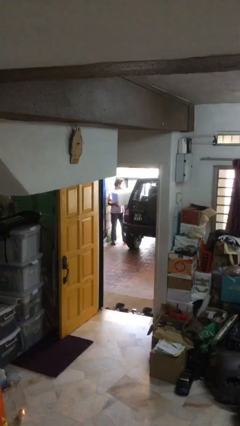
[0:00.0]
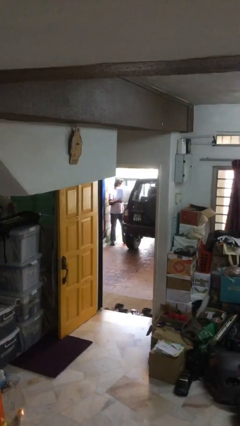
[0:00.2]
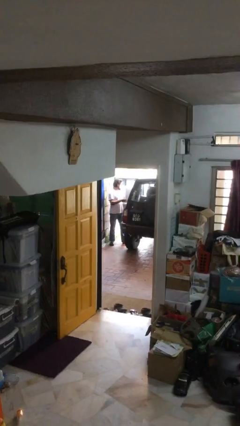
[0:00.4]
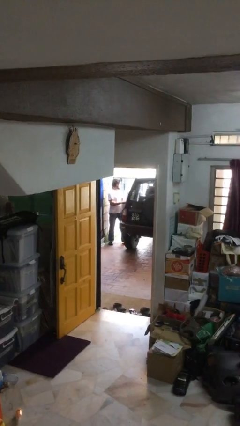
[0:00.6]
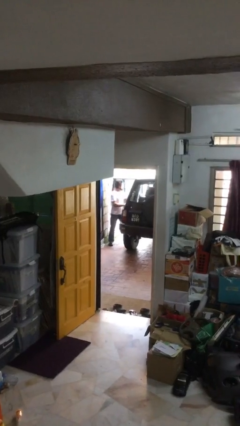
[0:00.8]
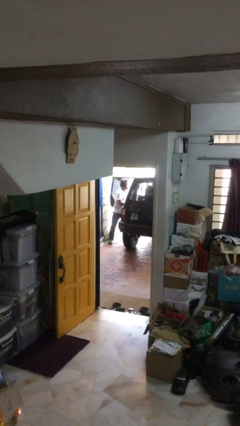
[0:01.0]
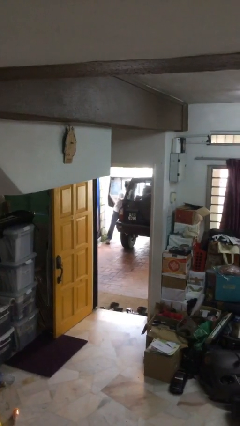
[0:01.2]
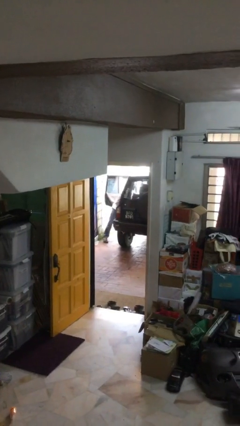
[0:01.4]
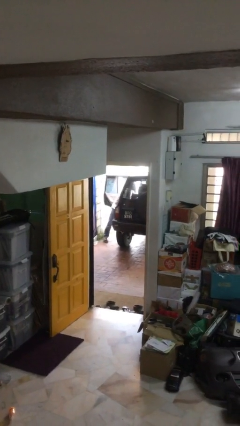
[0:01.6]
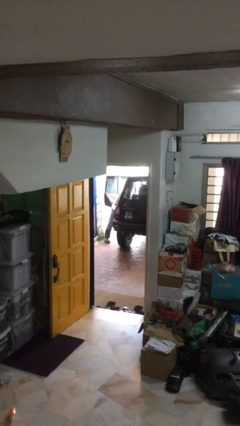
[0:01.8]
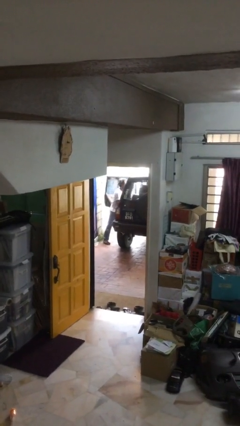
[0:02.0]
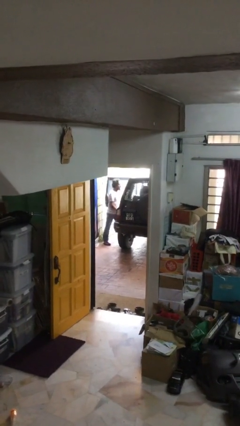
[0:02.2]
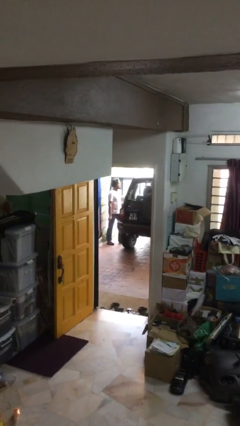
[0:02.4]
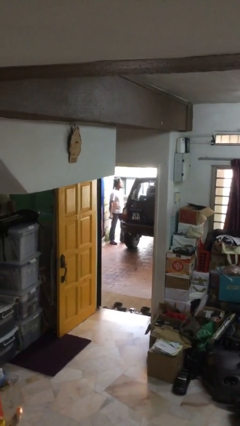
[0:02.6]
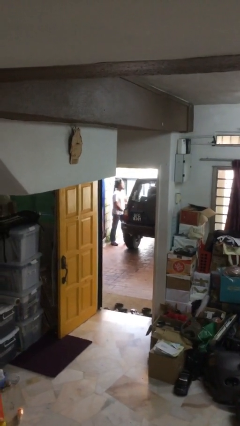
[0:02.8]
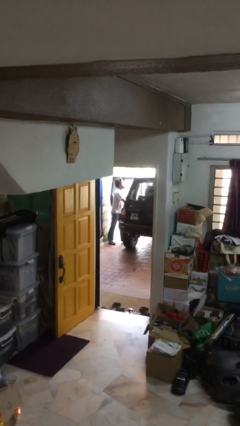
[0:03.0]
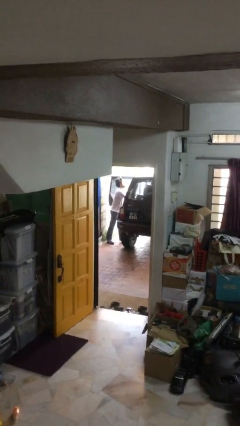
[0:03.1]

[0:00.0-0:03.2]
person loads car

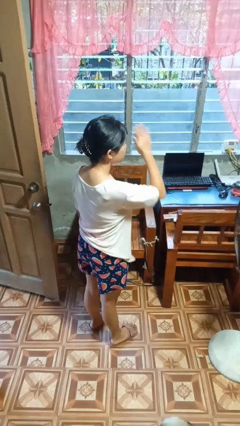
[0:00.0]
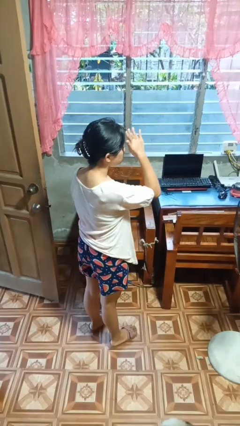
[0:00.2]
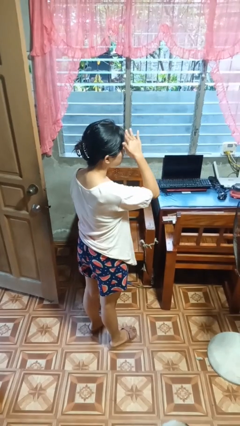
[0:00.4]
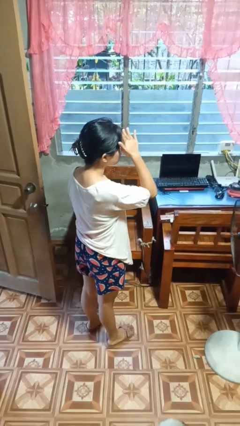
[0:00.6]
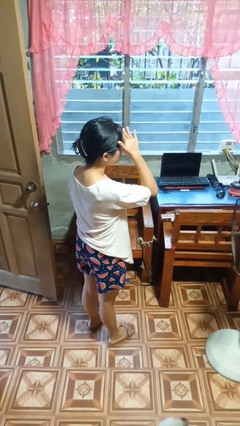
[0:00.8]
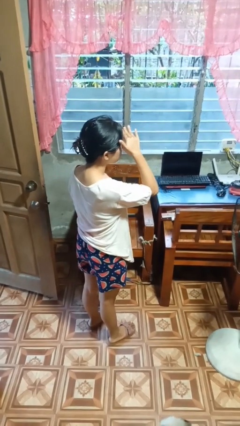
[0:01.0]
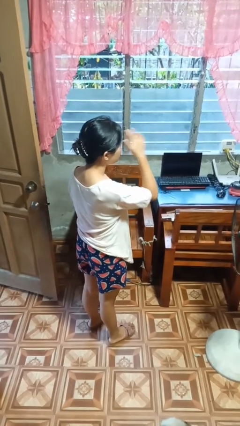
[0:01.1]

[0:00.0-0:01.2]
person shades eyes

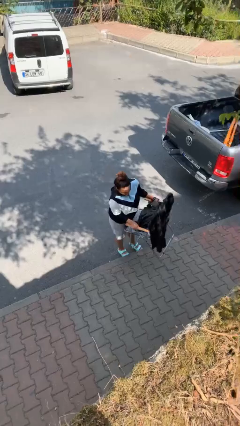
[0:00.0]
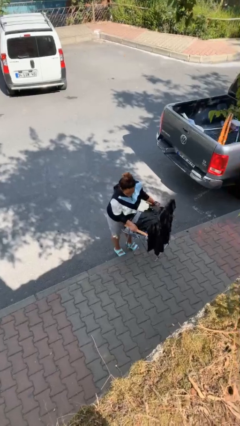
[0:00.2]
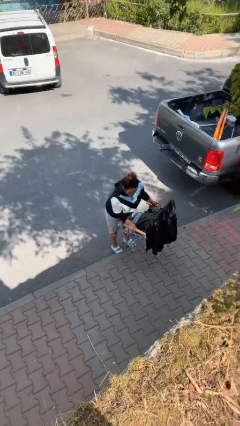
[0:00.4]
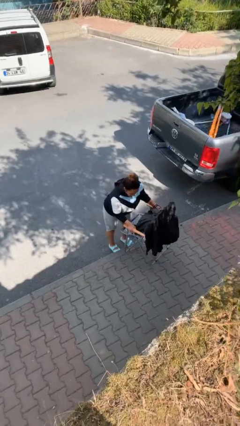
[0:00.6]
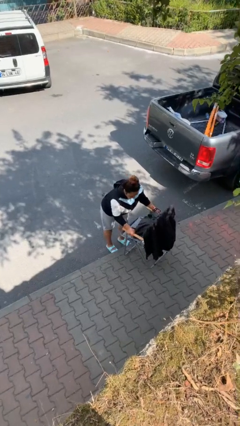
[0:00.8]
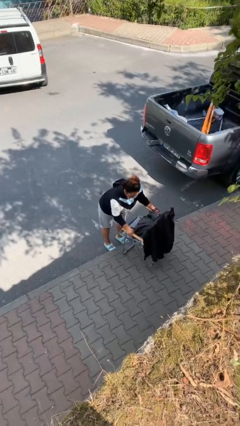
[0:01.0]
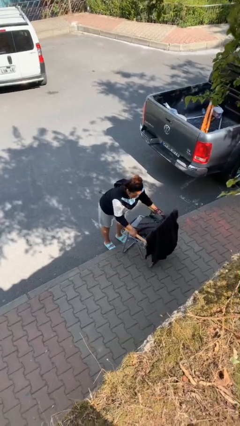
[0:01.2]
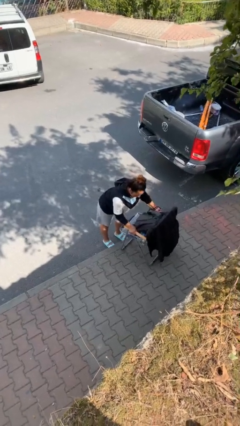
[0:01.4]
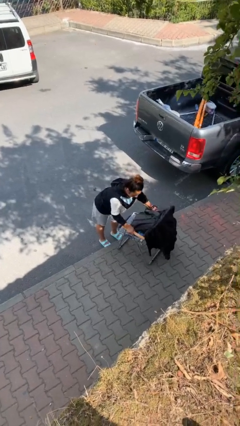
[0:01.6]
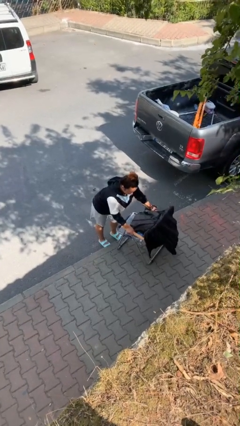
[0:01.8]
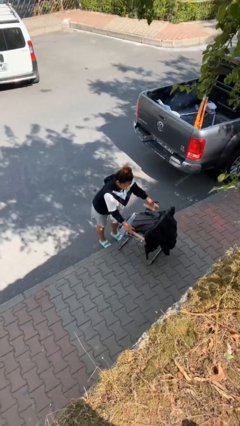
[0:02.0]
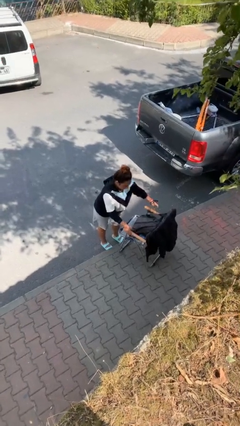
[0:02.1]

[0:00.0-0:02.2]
person puts down object on floor

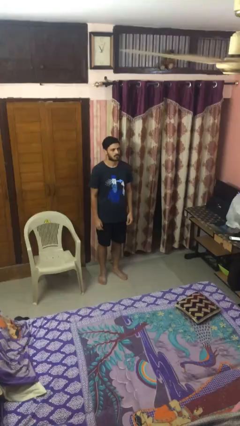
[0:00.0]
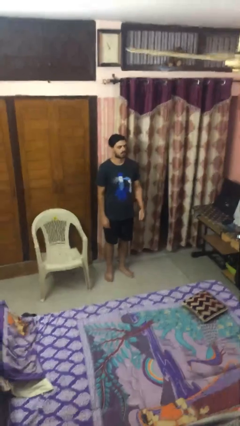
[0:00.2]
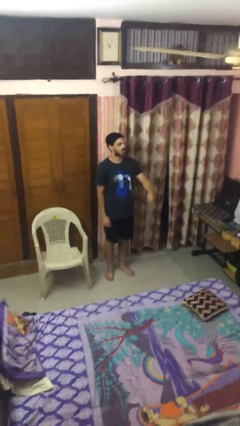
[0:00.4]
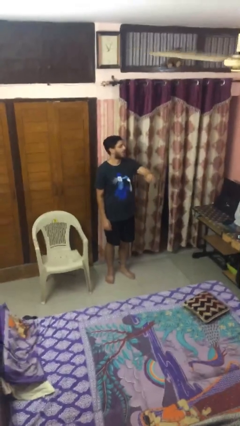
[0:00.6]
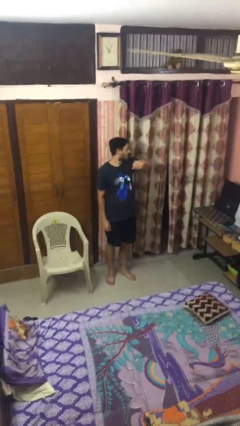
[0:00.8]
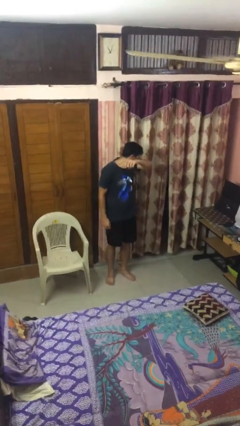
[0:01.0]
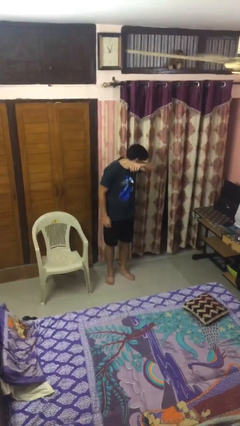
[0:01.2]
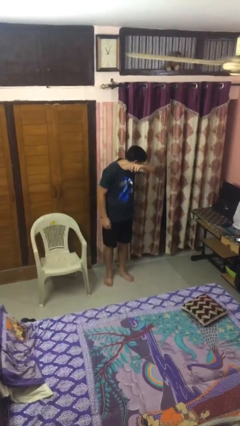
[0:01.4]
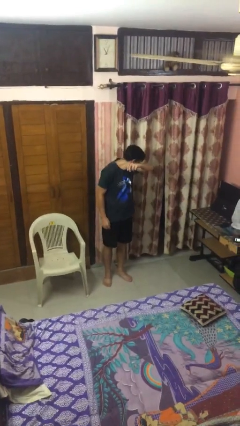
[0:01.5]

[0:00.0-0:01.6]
person sneezes into arm

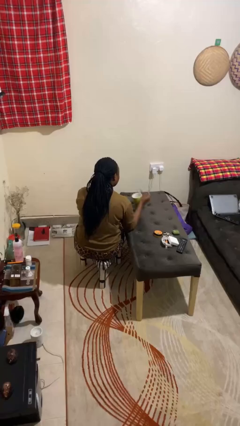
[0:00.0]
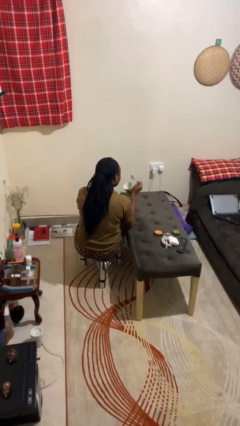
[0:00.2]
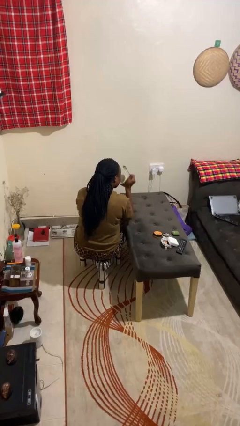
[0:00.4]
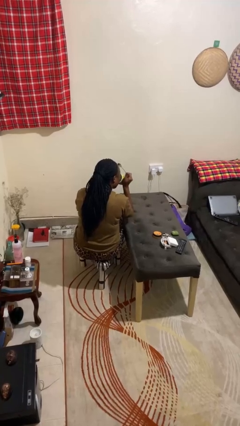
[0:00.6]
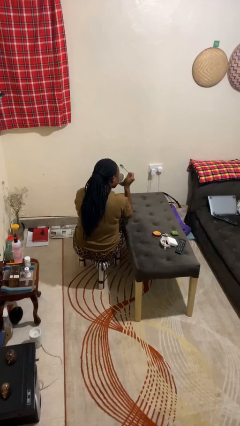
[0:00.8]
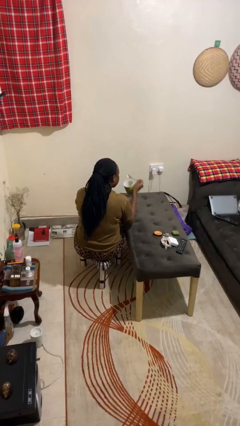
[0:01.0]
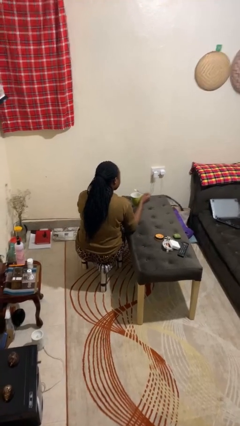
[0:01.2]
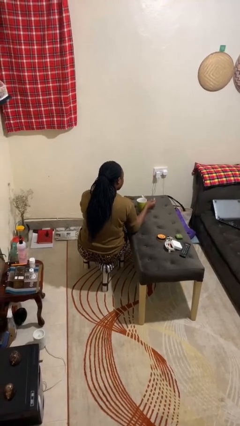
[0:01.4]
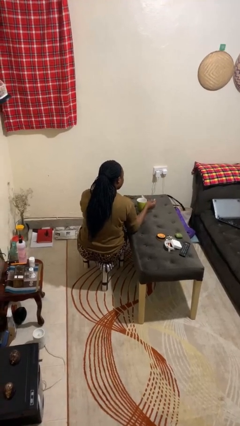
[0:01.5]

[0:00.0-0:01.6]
person drinks from mug

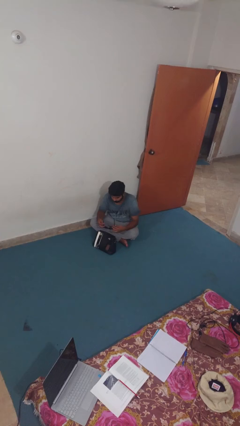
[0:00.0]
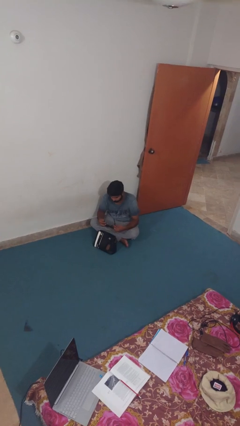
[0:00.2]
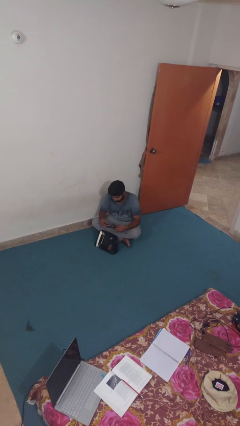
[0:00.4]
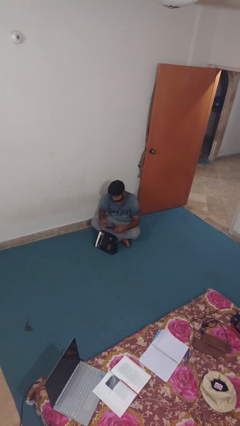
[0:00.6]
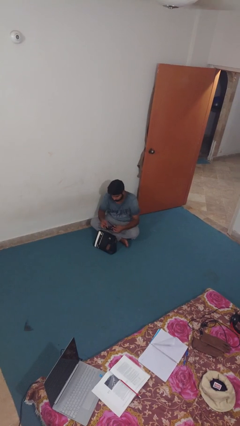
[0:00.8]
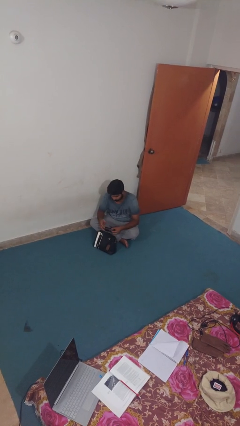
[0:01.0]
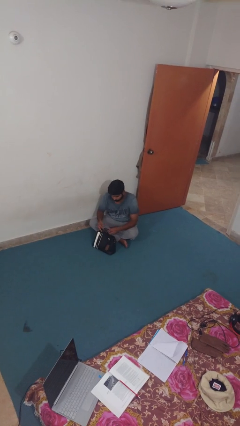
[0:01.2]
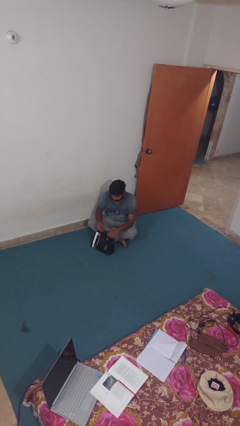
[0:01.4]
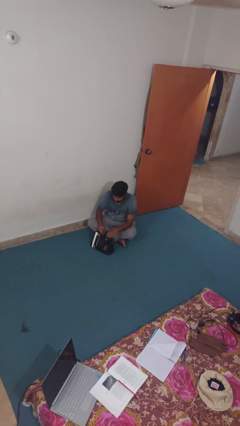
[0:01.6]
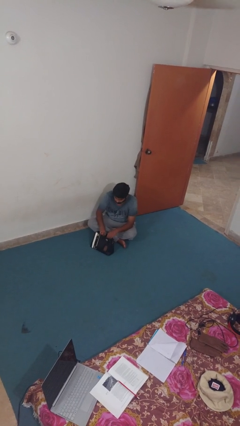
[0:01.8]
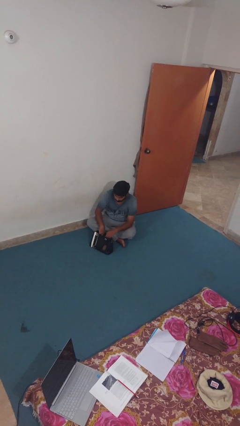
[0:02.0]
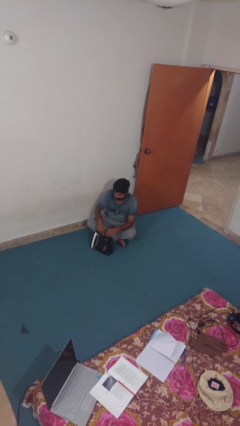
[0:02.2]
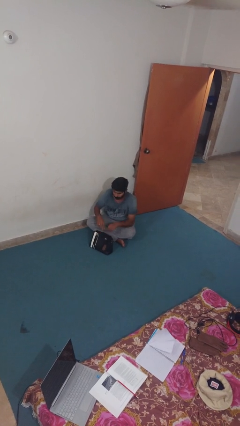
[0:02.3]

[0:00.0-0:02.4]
person puts object into purse

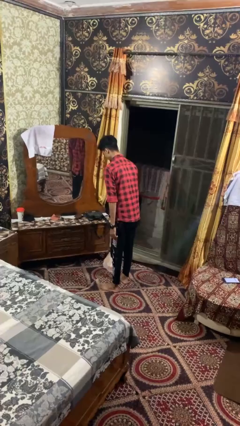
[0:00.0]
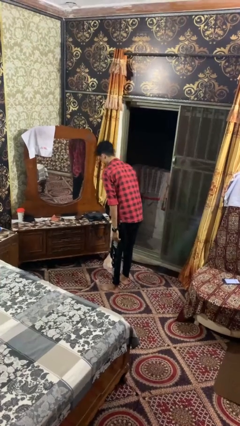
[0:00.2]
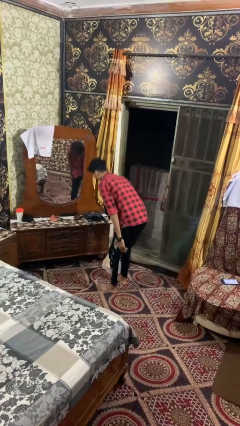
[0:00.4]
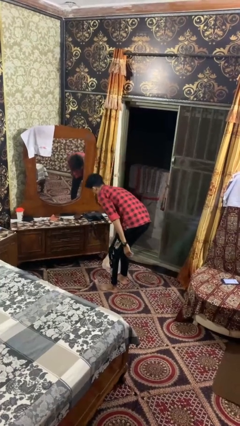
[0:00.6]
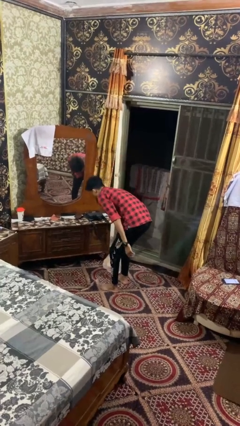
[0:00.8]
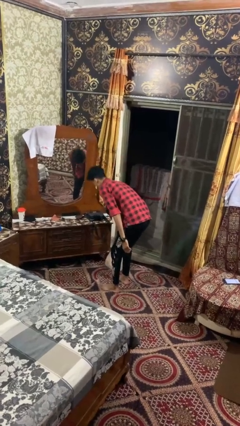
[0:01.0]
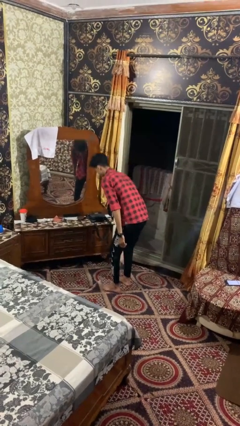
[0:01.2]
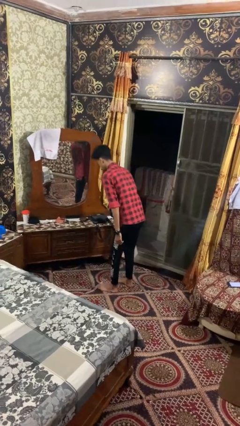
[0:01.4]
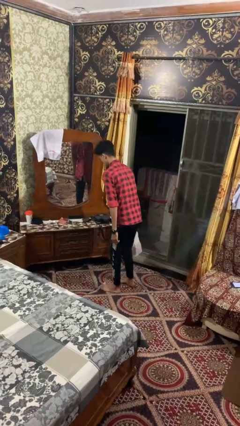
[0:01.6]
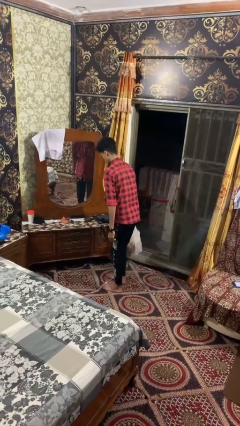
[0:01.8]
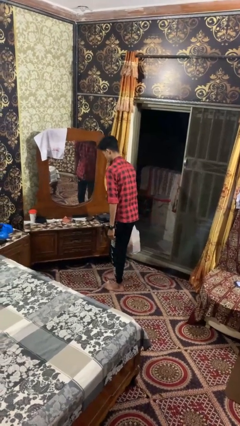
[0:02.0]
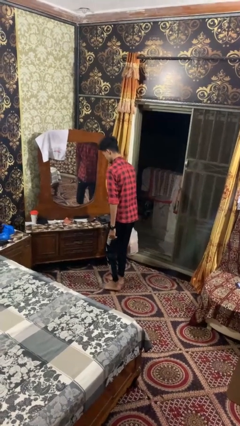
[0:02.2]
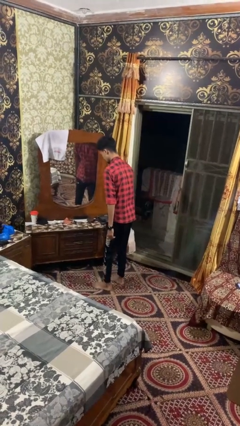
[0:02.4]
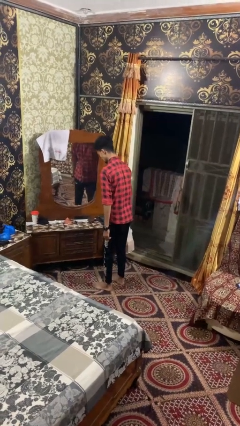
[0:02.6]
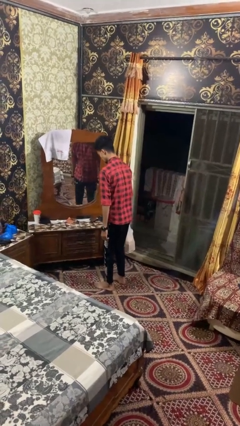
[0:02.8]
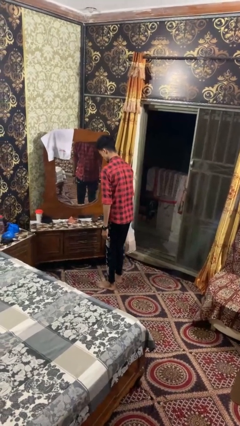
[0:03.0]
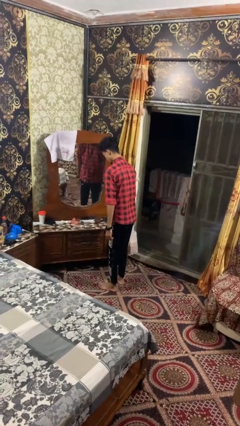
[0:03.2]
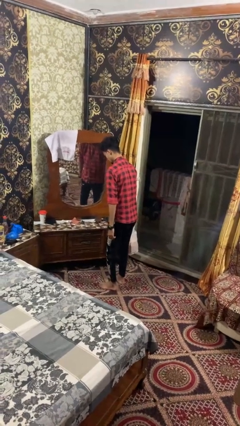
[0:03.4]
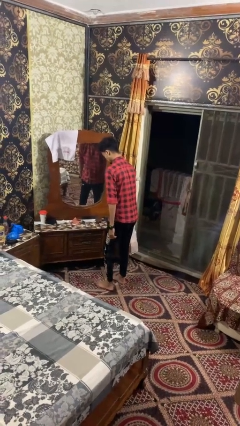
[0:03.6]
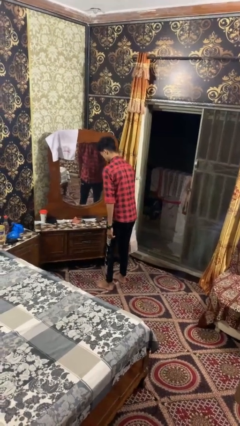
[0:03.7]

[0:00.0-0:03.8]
person carries groceries

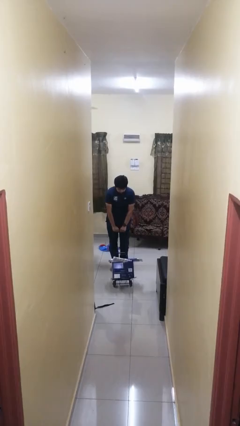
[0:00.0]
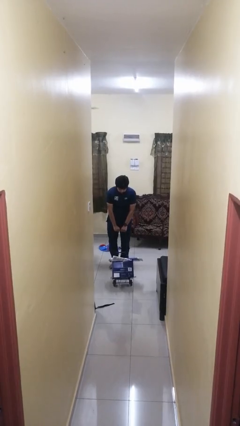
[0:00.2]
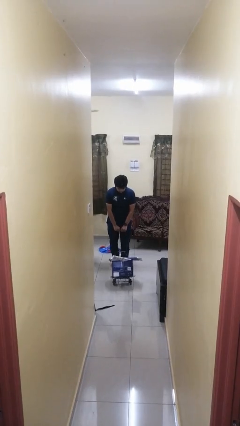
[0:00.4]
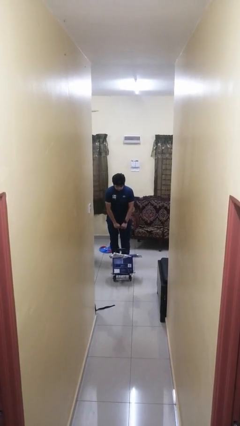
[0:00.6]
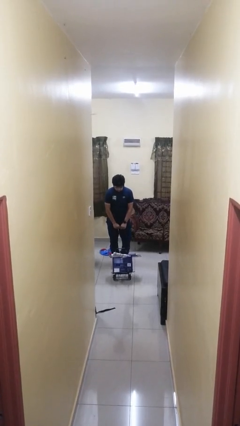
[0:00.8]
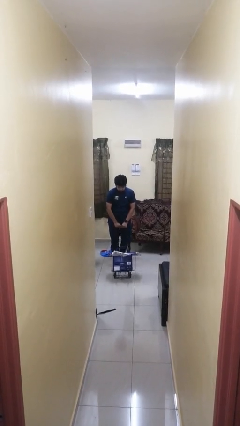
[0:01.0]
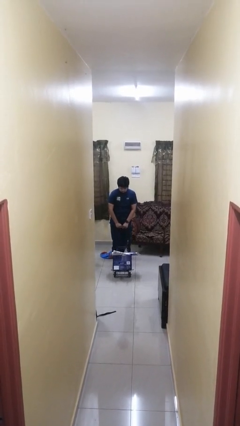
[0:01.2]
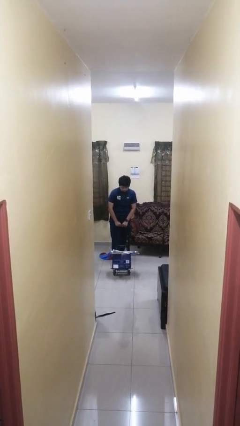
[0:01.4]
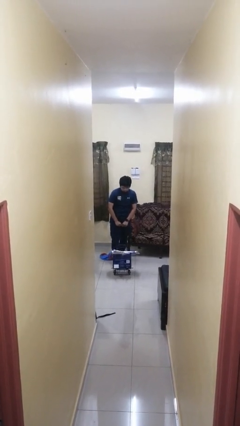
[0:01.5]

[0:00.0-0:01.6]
person pulls wheeled cart
